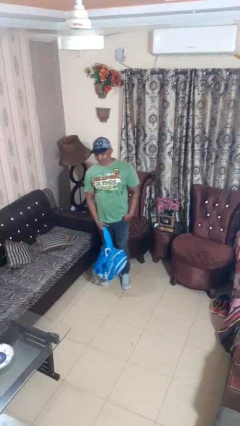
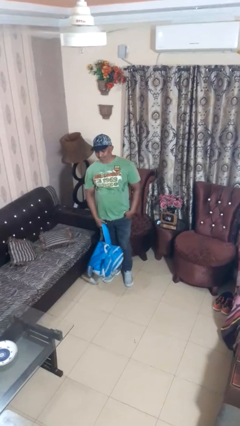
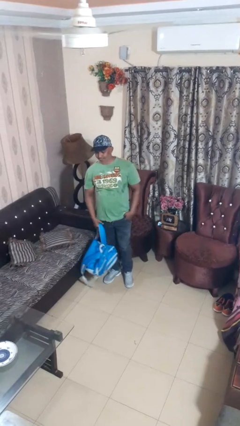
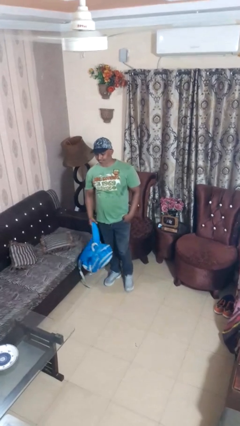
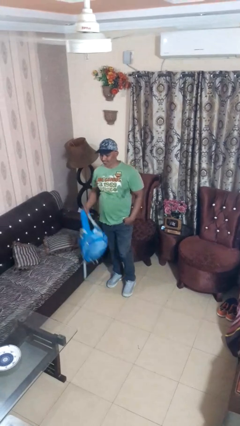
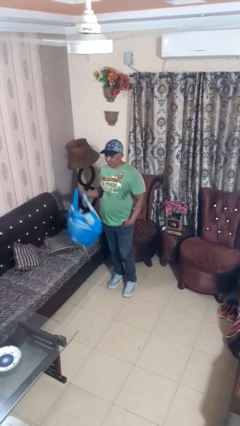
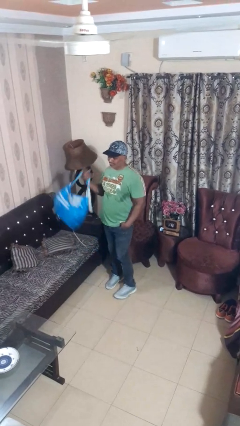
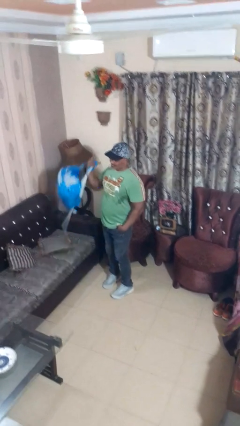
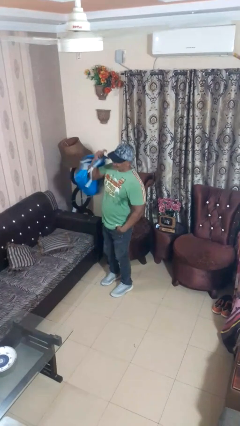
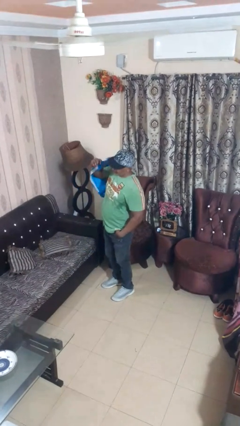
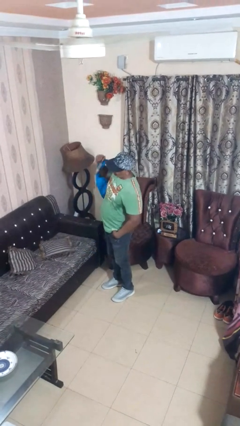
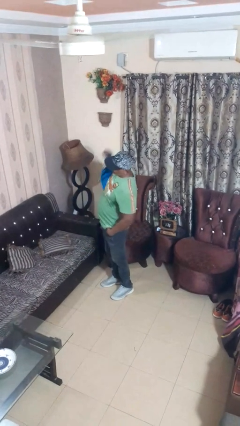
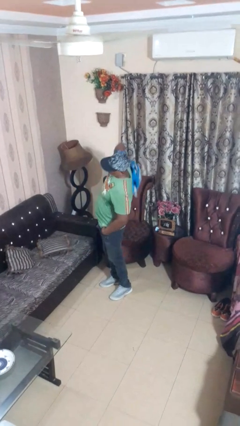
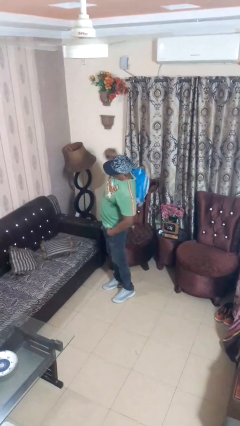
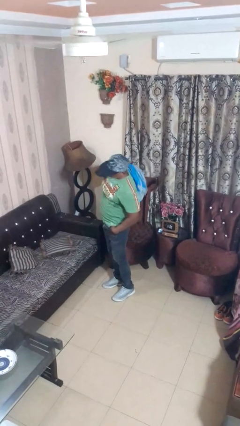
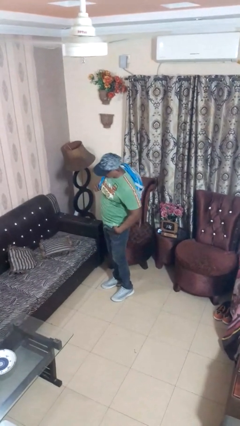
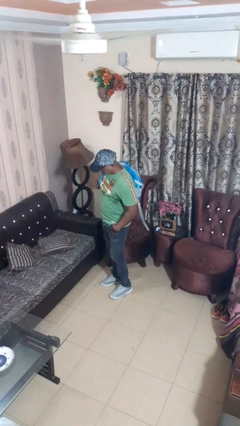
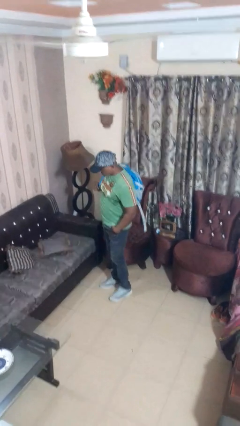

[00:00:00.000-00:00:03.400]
person puts on backpack

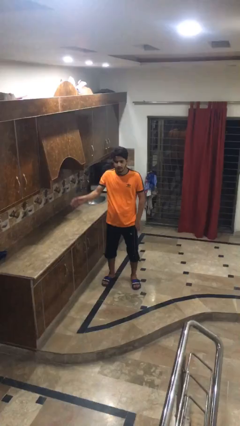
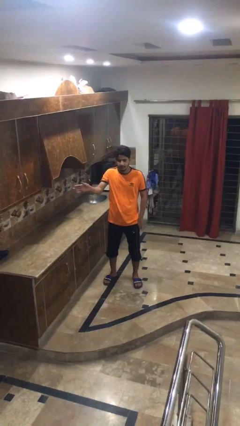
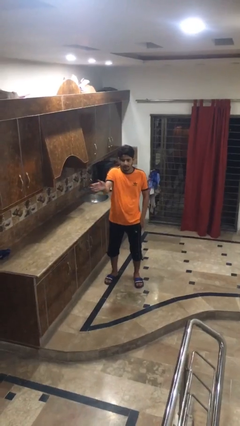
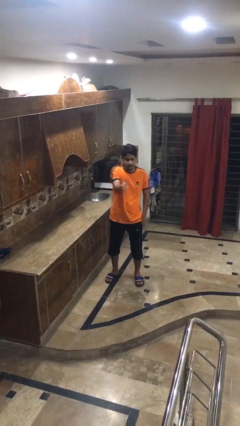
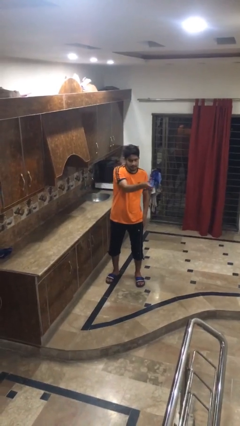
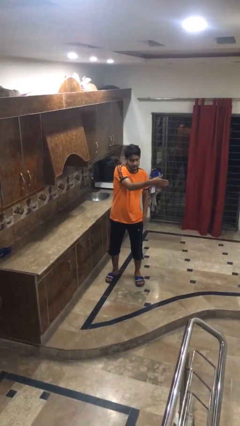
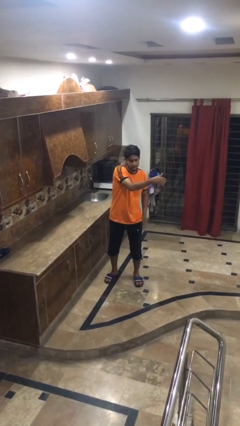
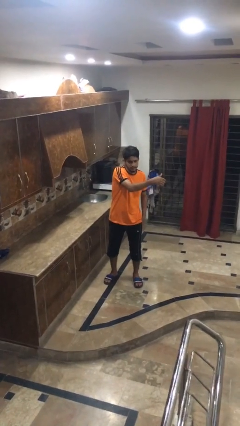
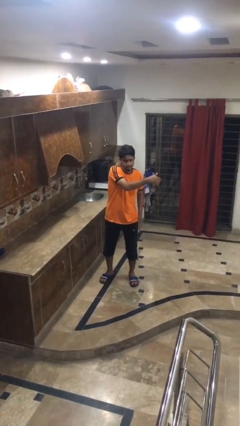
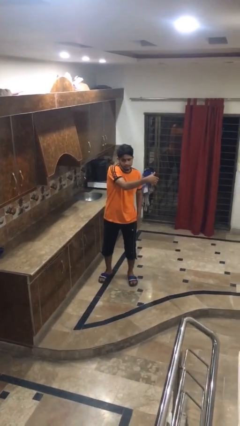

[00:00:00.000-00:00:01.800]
person gestures swipe left

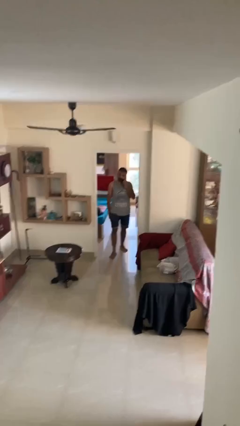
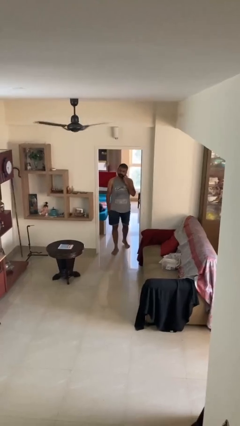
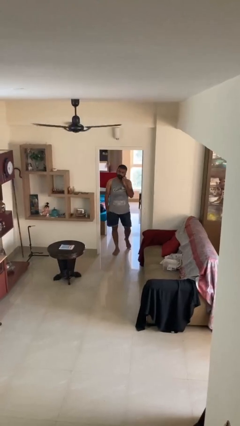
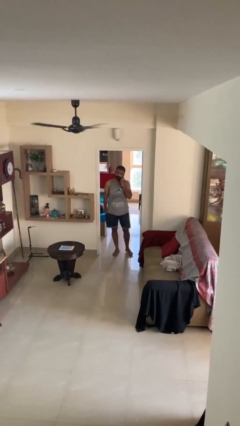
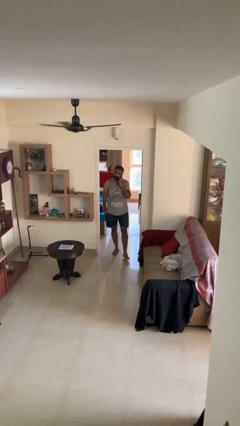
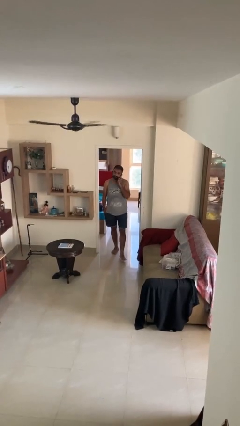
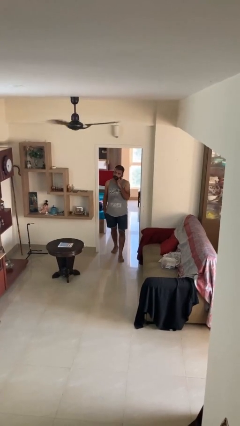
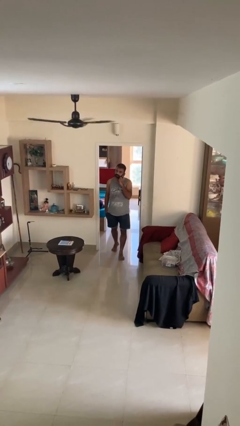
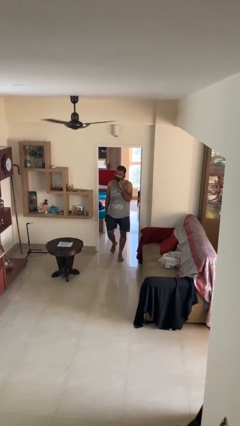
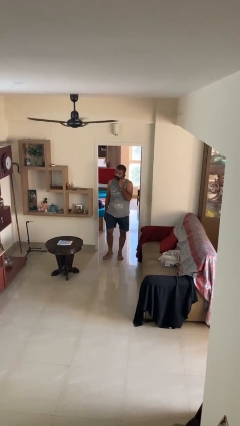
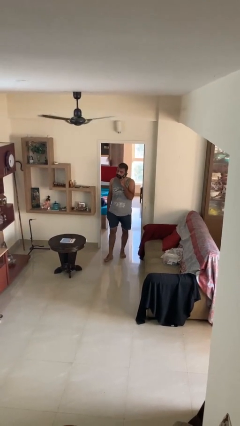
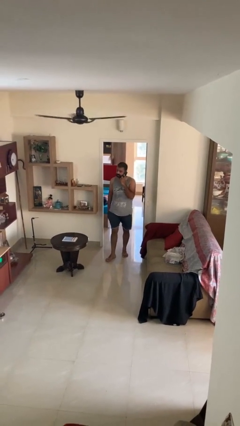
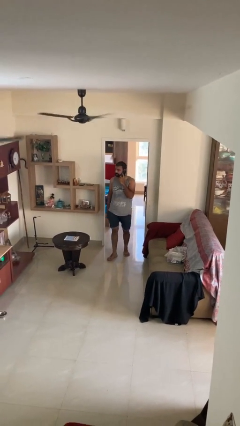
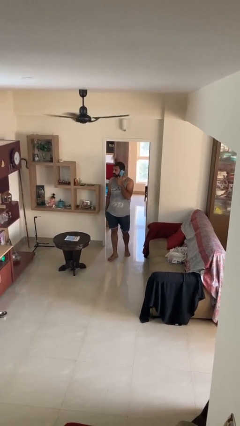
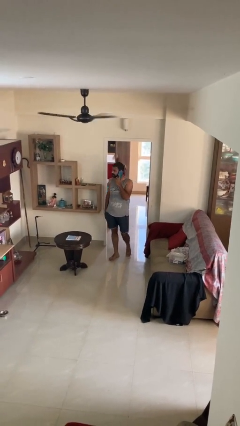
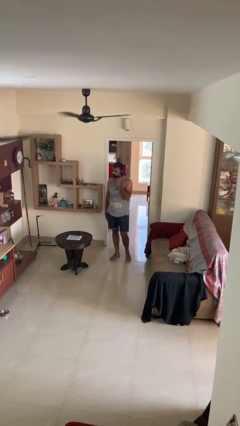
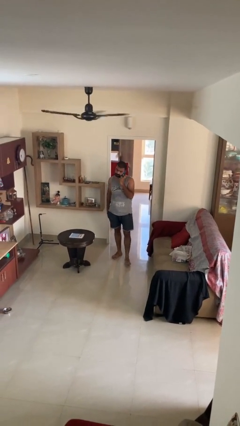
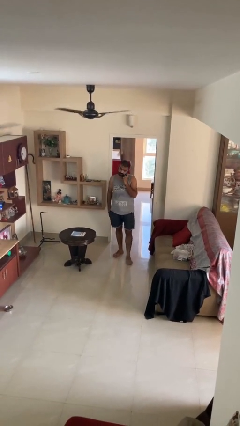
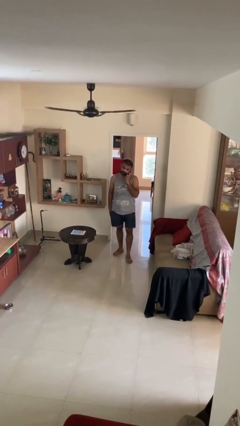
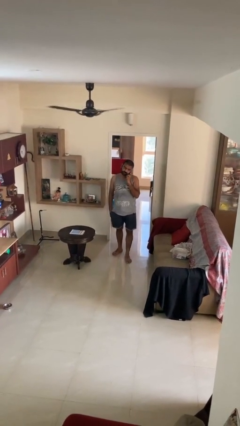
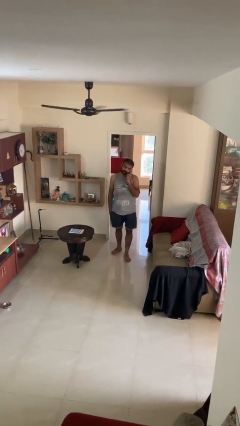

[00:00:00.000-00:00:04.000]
person enters scene through structure

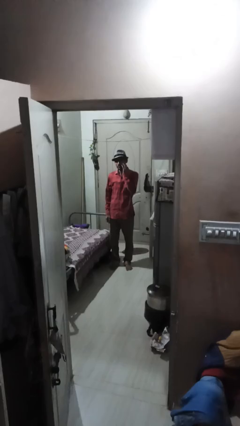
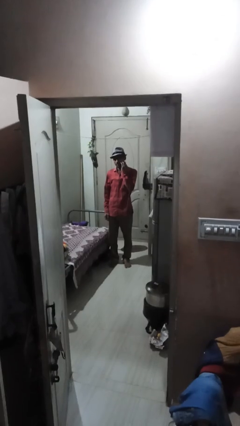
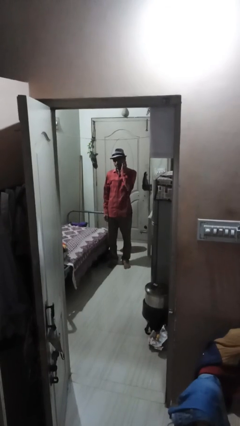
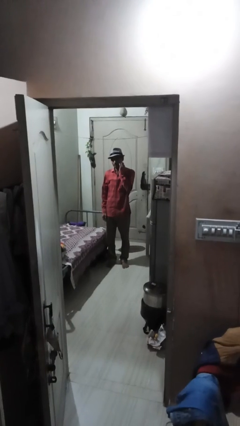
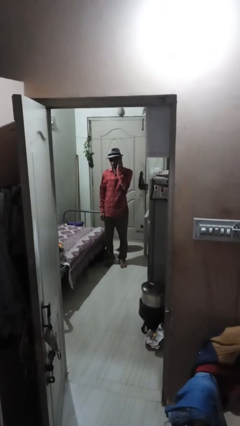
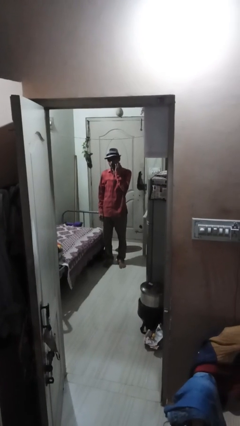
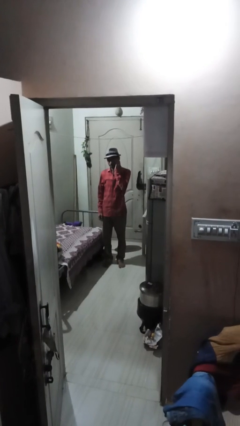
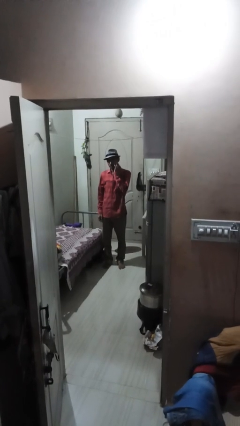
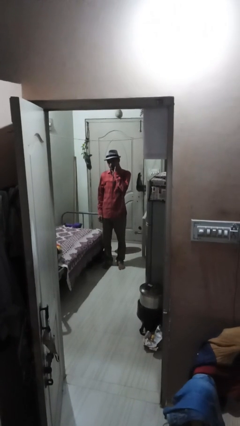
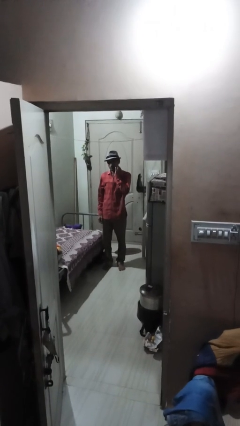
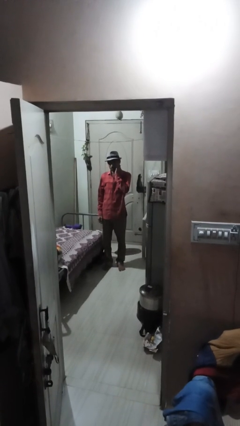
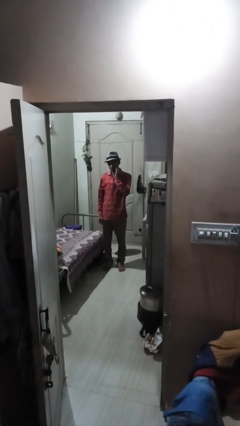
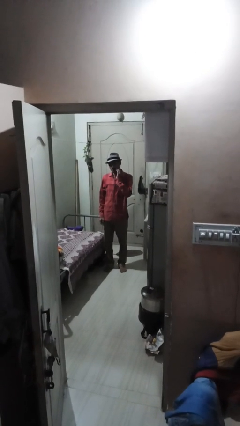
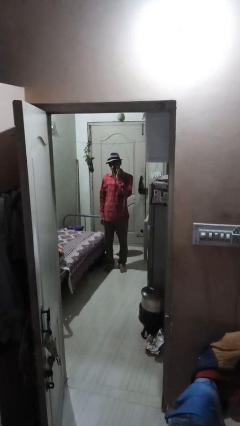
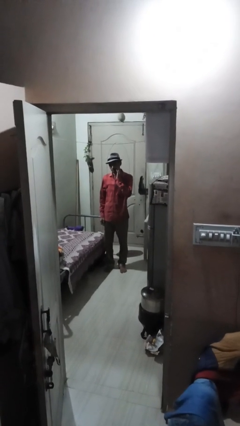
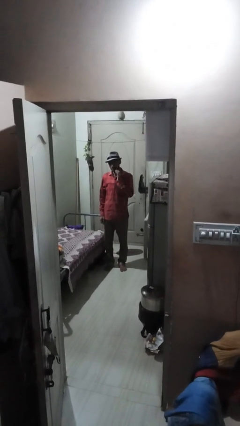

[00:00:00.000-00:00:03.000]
person scratches face

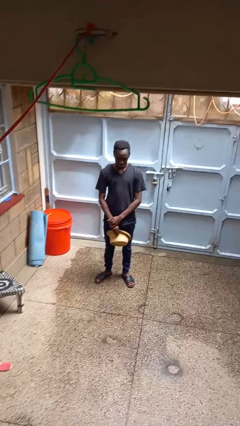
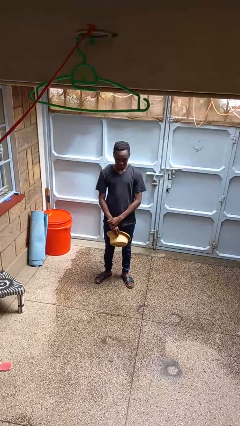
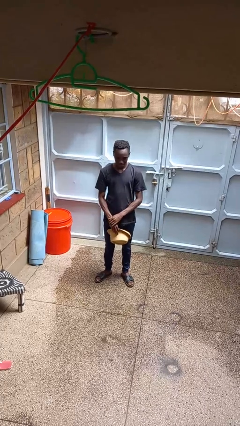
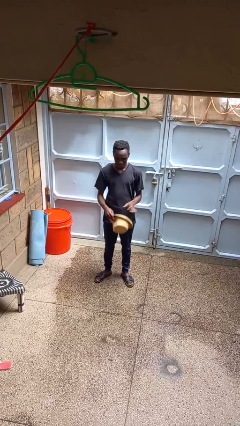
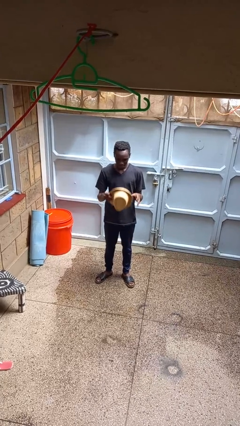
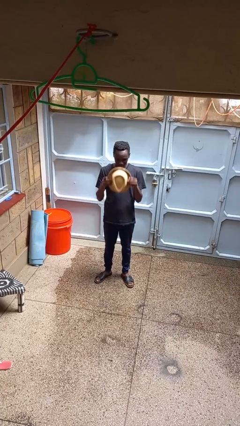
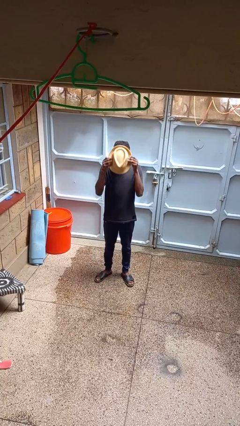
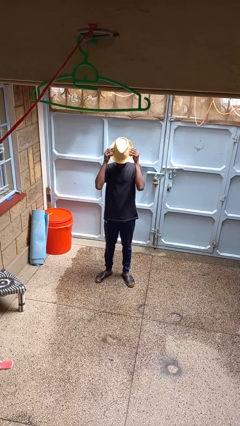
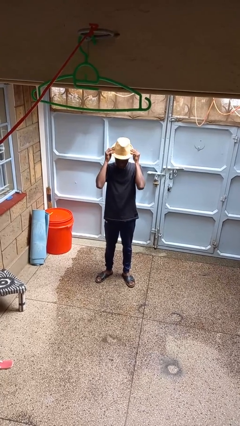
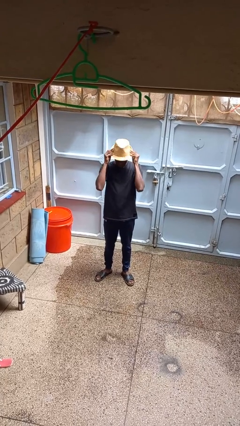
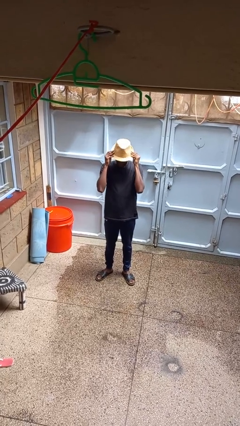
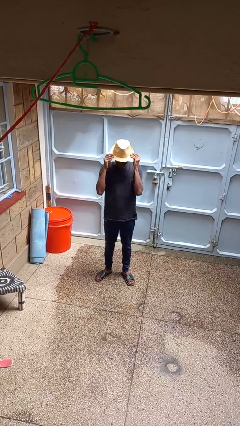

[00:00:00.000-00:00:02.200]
person puts on hat

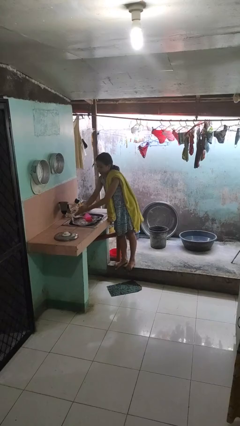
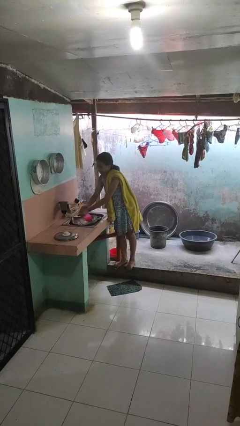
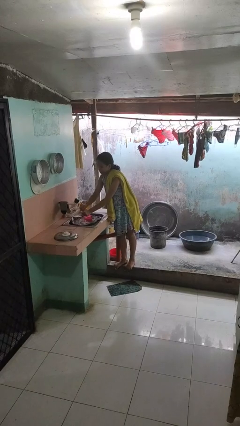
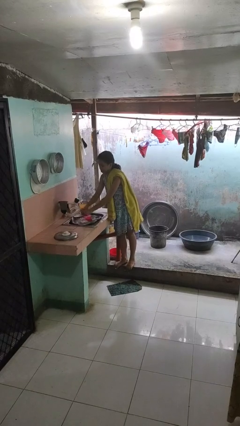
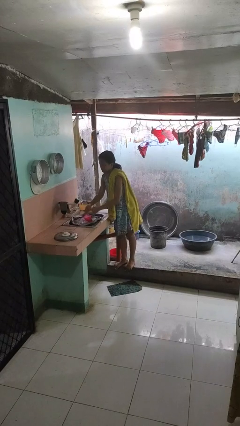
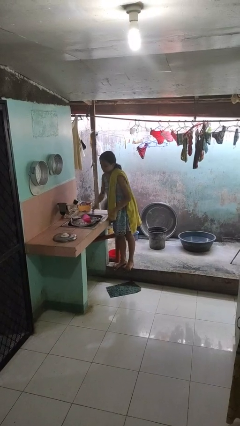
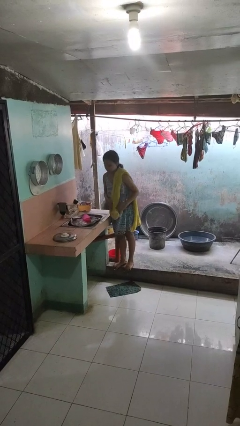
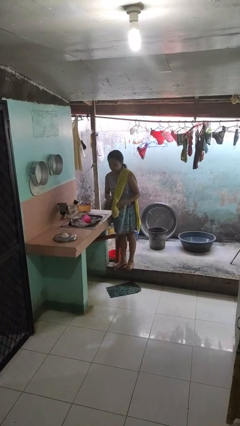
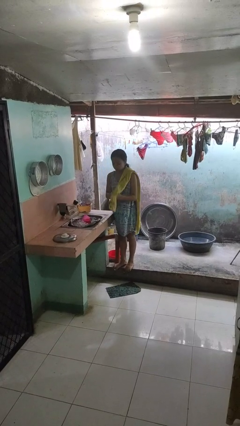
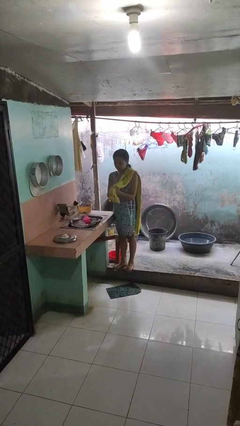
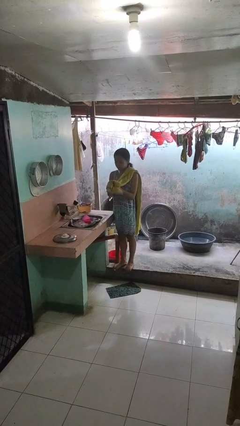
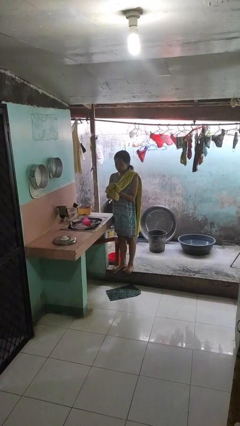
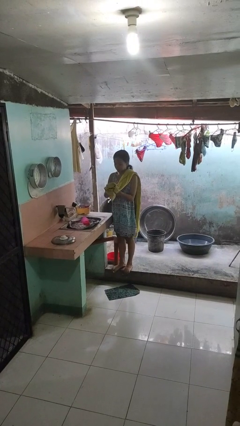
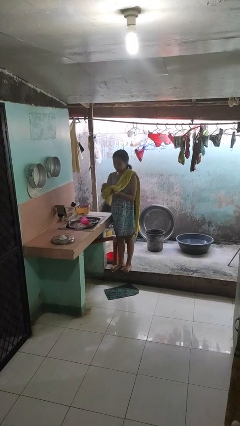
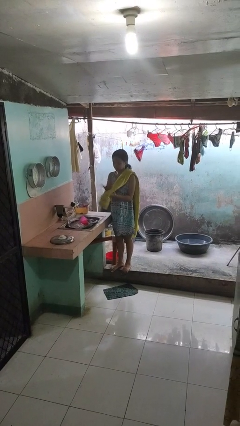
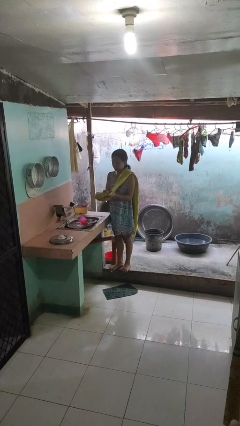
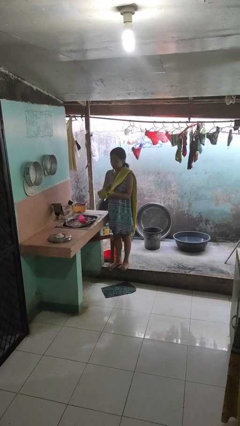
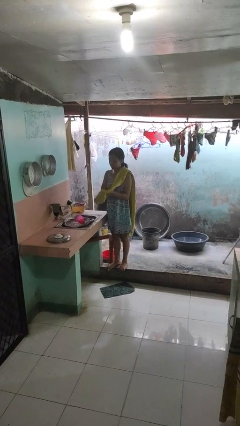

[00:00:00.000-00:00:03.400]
person dries hands with towel
